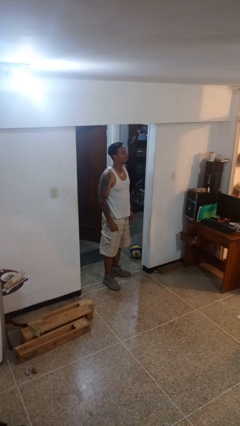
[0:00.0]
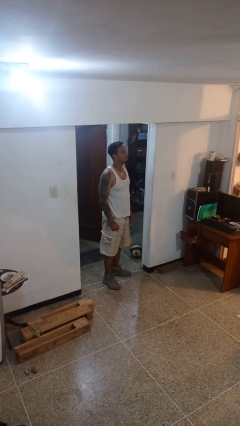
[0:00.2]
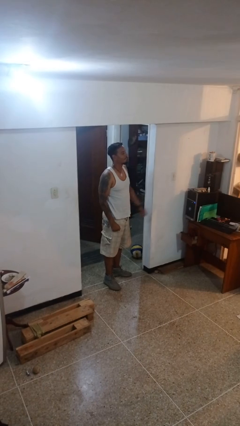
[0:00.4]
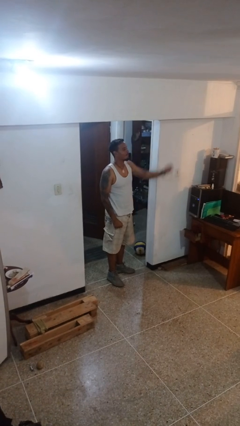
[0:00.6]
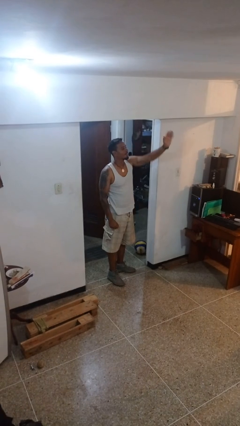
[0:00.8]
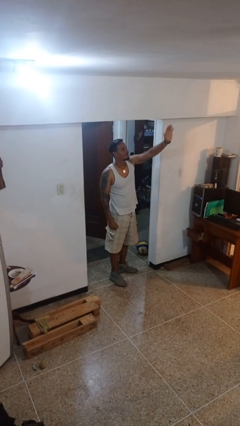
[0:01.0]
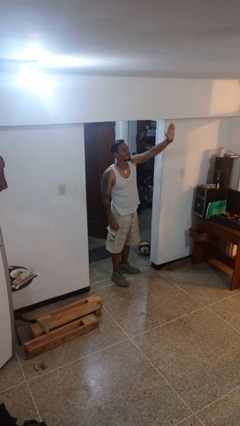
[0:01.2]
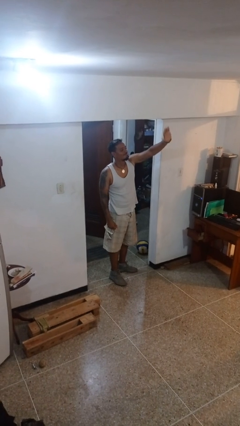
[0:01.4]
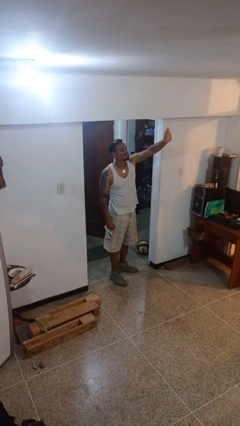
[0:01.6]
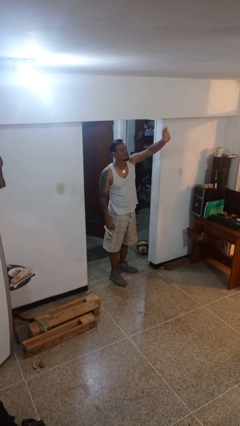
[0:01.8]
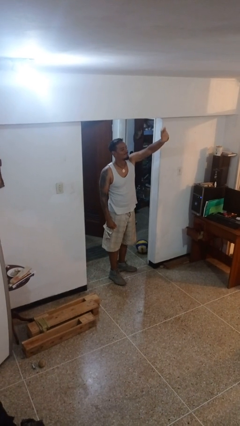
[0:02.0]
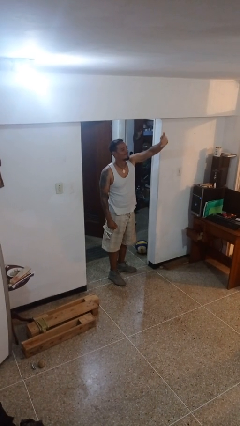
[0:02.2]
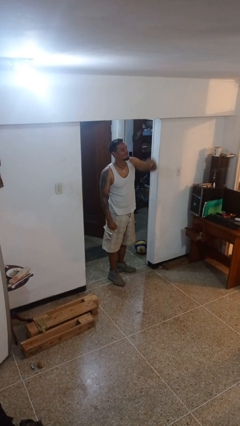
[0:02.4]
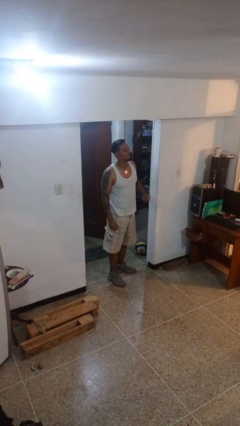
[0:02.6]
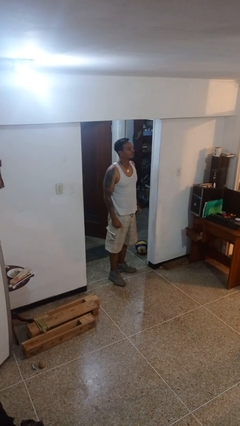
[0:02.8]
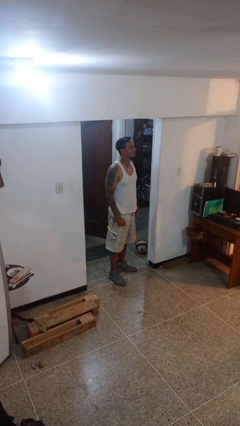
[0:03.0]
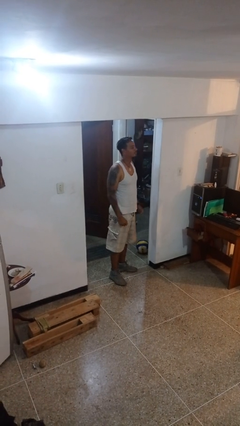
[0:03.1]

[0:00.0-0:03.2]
person waves at person

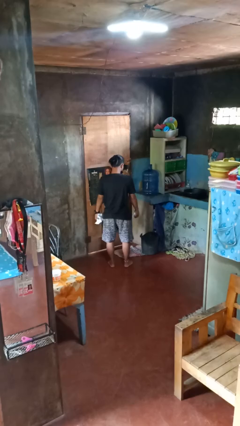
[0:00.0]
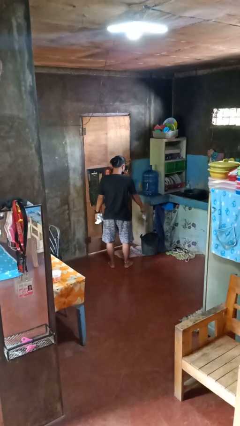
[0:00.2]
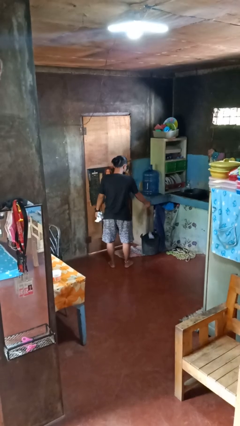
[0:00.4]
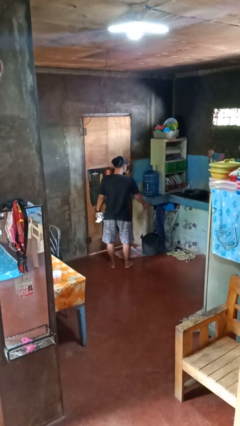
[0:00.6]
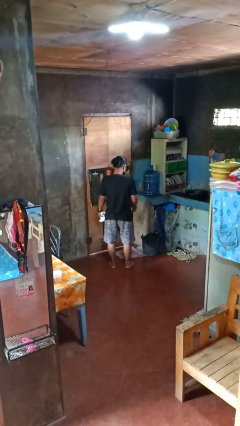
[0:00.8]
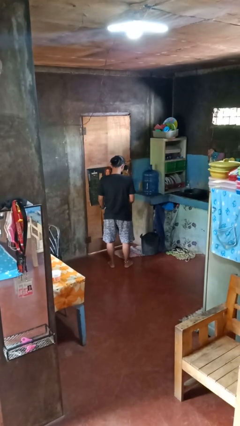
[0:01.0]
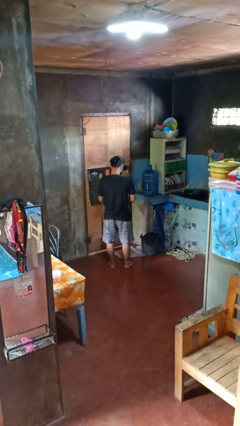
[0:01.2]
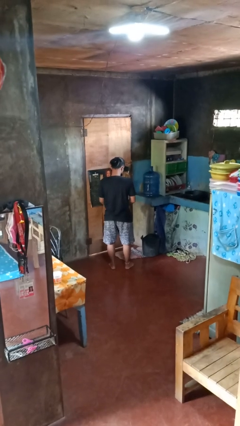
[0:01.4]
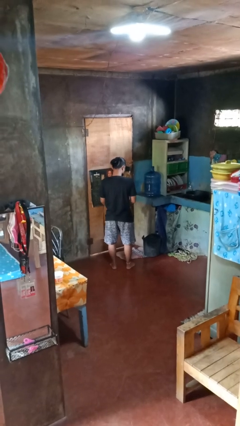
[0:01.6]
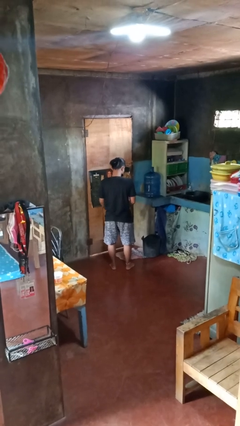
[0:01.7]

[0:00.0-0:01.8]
person discards trash

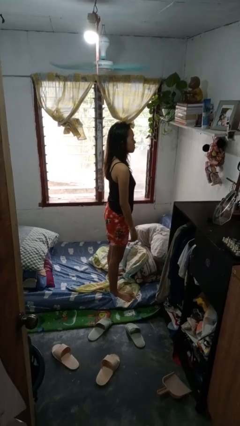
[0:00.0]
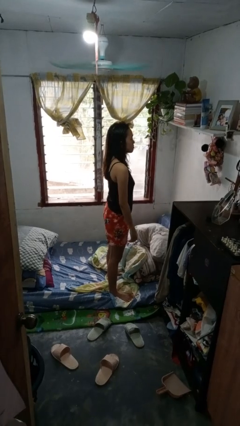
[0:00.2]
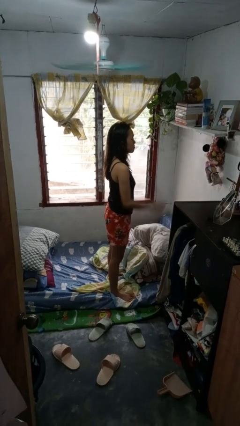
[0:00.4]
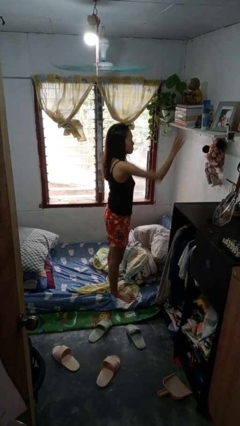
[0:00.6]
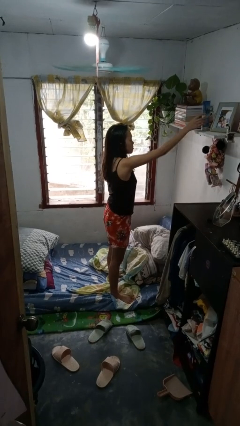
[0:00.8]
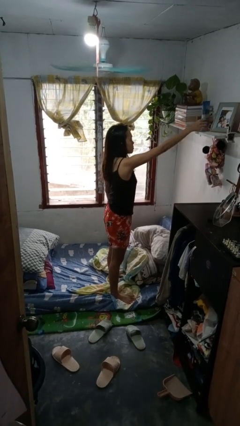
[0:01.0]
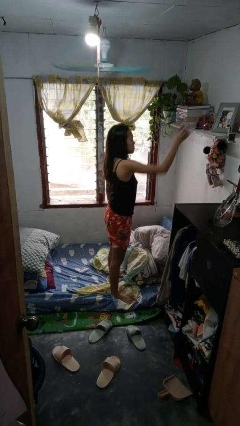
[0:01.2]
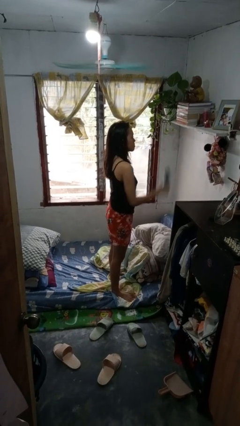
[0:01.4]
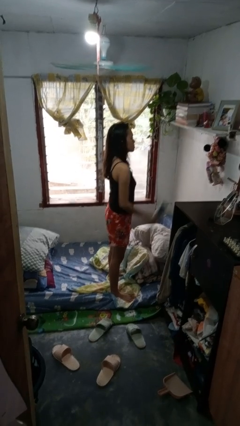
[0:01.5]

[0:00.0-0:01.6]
person picks up object from shelf

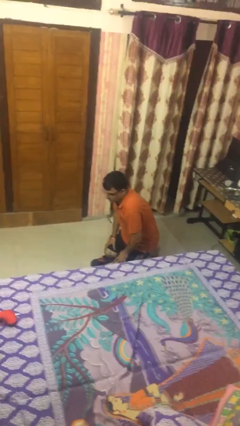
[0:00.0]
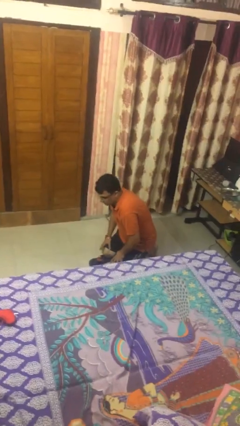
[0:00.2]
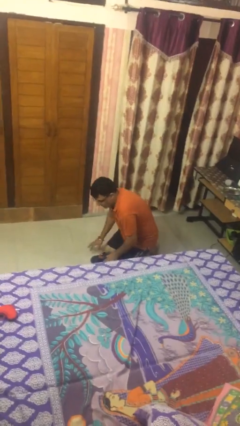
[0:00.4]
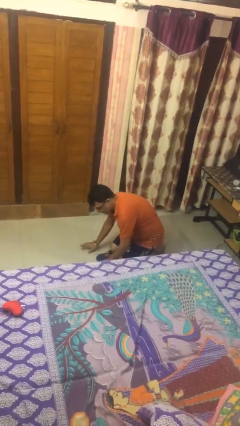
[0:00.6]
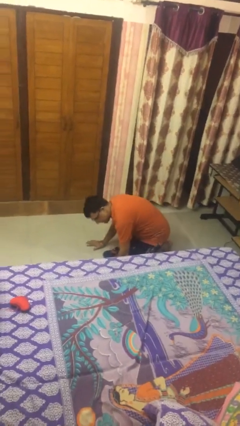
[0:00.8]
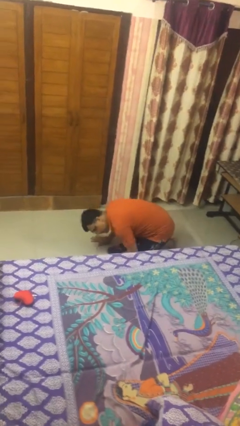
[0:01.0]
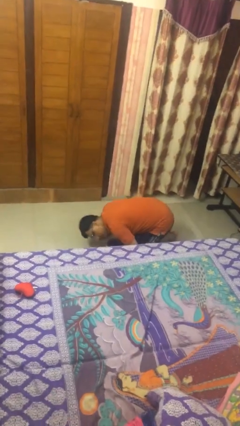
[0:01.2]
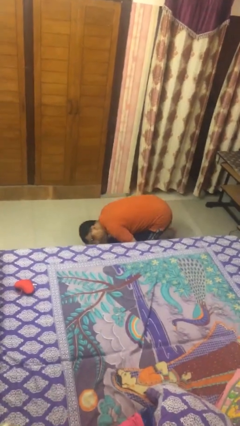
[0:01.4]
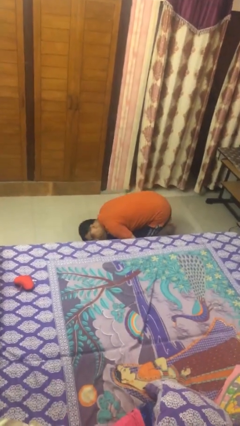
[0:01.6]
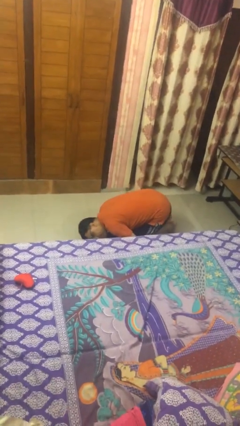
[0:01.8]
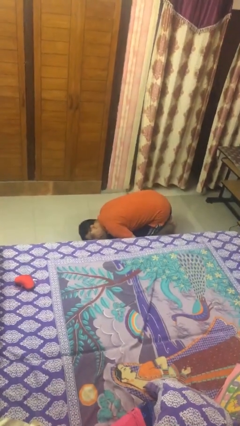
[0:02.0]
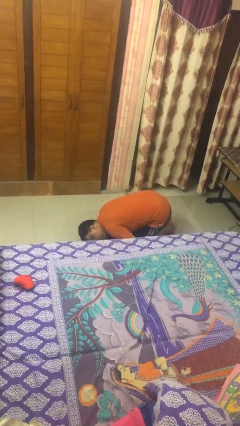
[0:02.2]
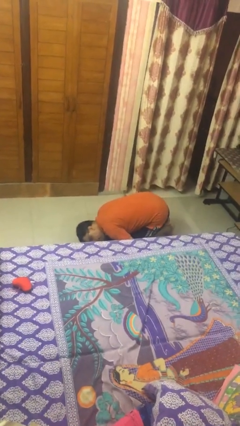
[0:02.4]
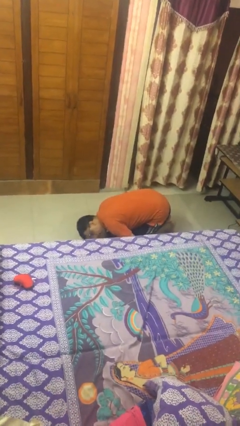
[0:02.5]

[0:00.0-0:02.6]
person searches under bed

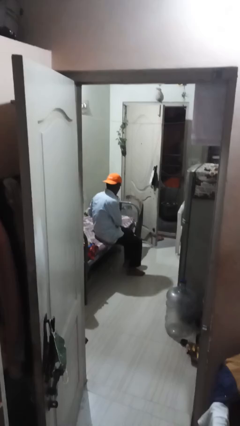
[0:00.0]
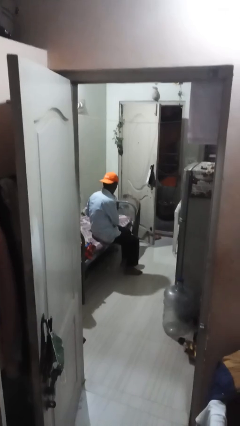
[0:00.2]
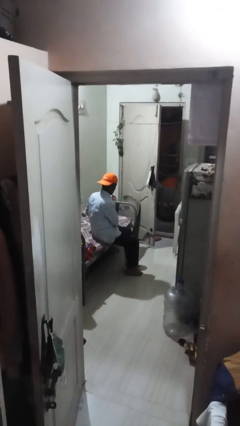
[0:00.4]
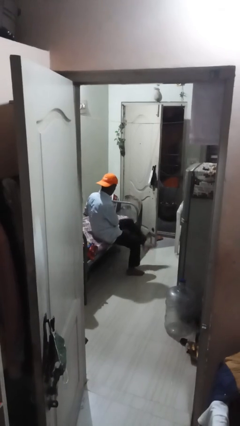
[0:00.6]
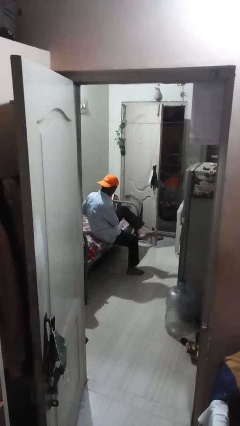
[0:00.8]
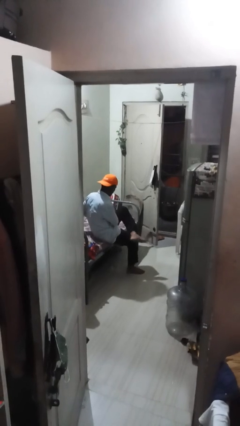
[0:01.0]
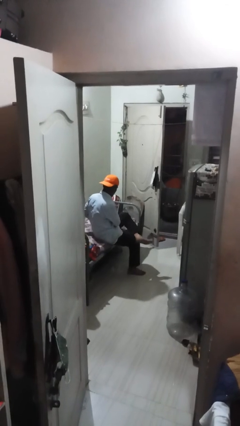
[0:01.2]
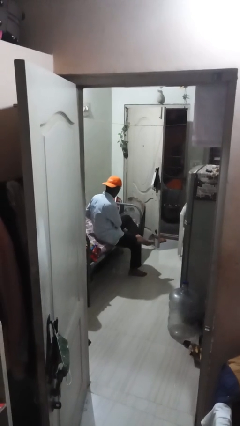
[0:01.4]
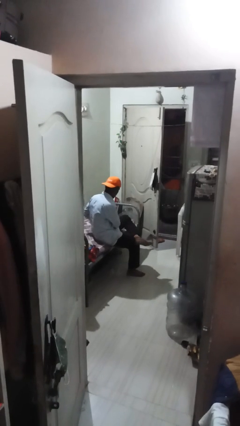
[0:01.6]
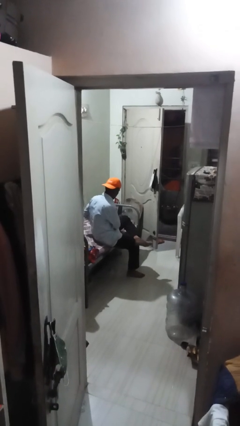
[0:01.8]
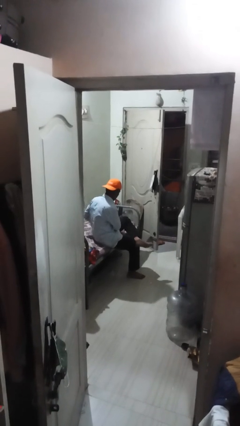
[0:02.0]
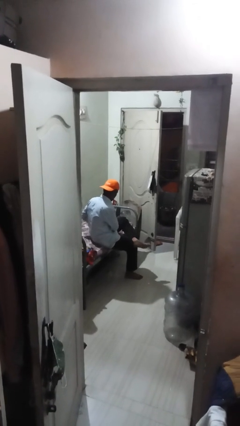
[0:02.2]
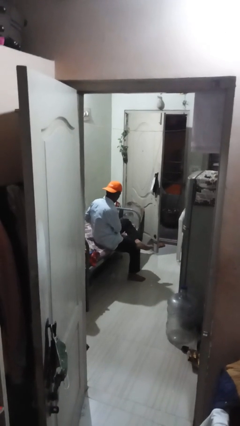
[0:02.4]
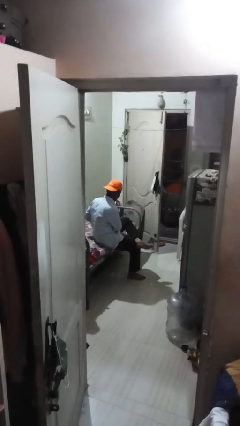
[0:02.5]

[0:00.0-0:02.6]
person crosses legs

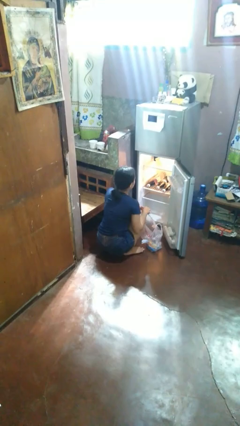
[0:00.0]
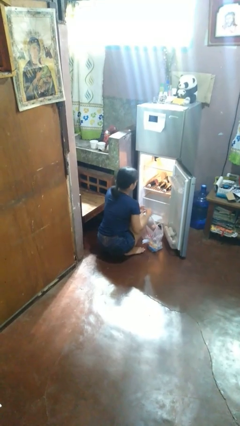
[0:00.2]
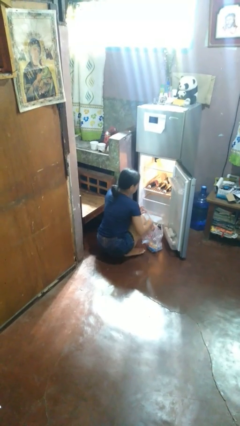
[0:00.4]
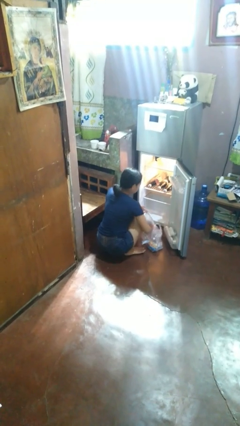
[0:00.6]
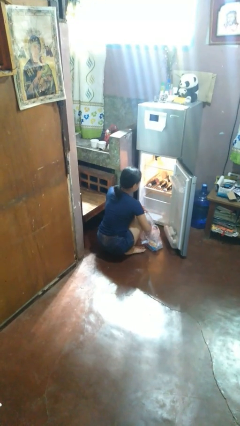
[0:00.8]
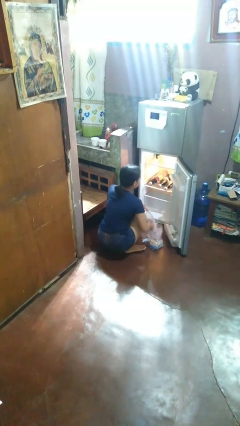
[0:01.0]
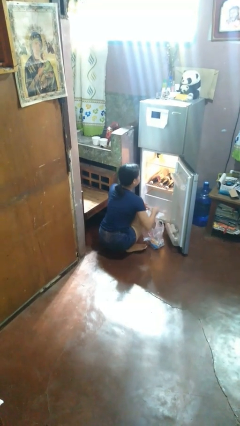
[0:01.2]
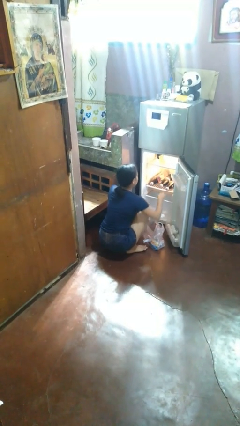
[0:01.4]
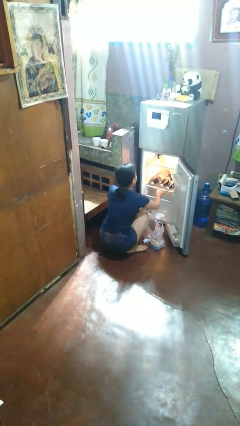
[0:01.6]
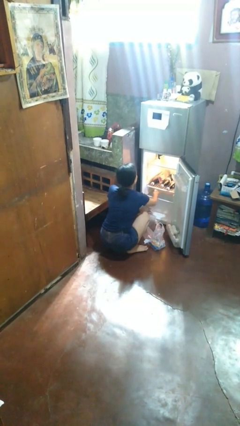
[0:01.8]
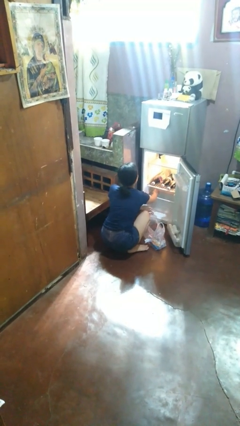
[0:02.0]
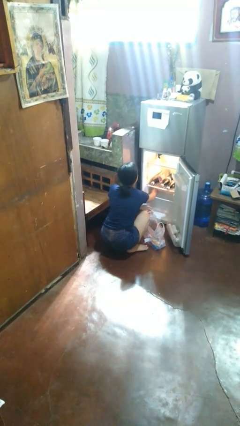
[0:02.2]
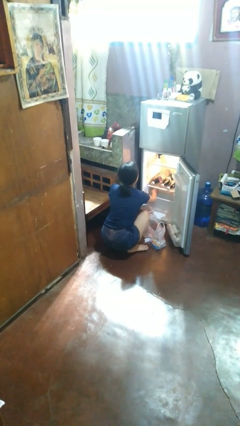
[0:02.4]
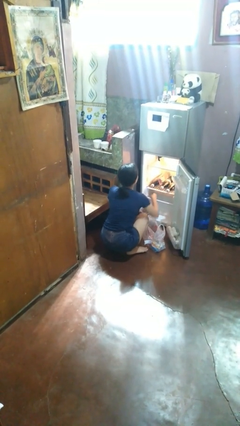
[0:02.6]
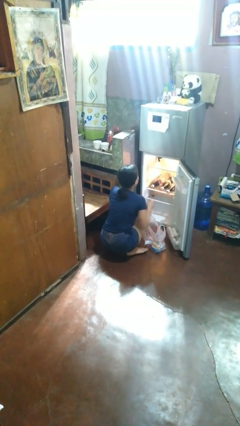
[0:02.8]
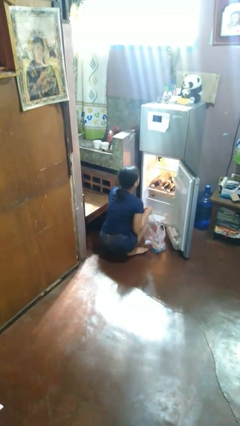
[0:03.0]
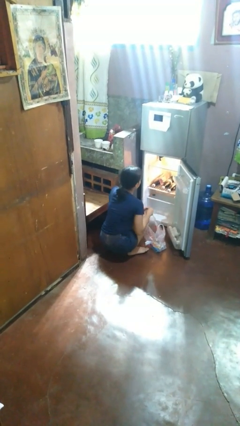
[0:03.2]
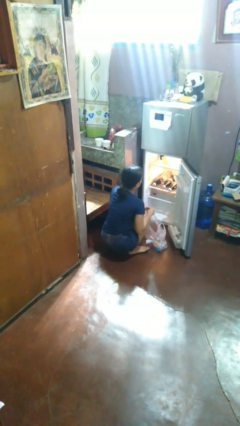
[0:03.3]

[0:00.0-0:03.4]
person loads groceries into refrigerator

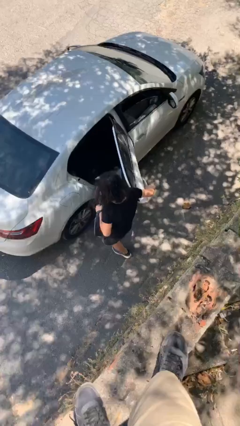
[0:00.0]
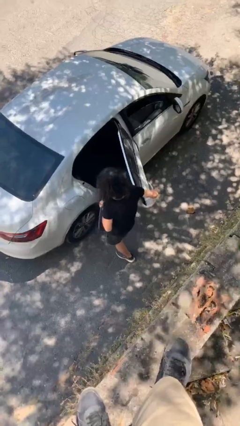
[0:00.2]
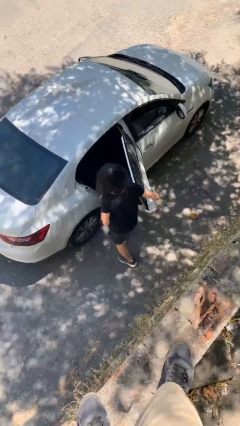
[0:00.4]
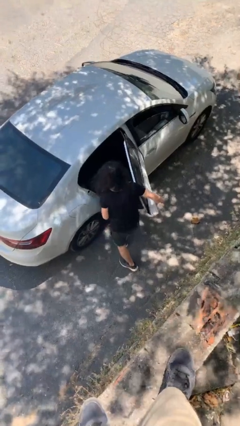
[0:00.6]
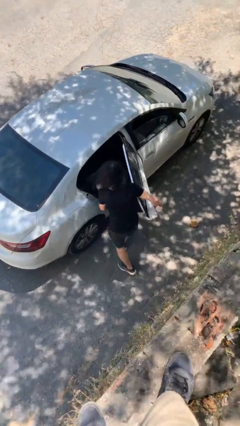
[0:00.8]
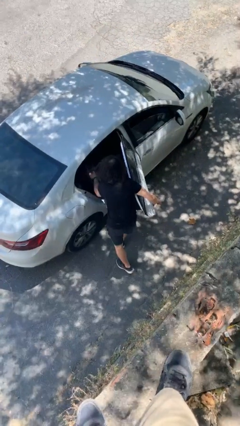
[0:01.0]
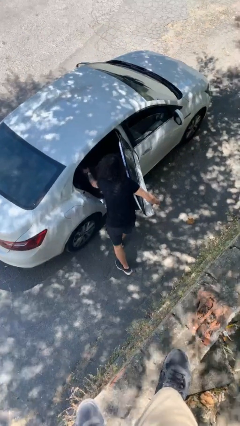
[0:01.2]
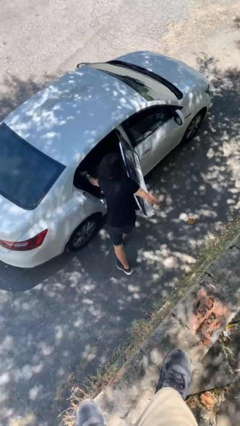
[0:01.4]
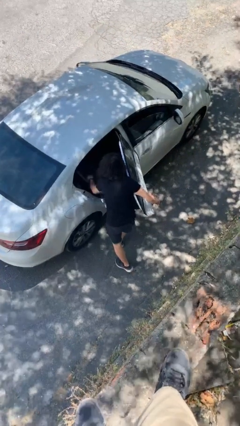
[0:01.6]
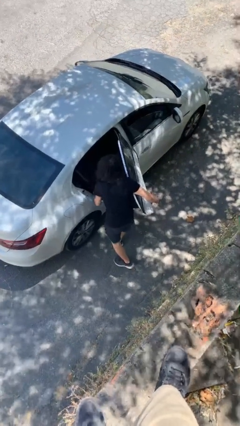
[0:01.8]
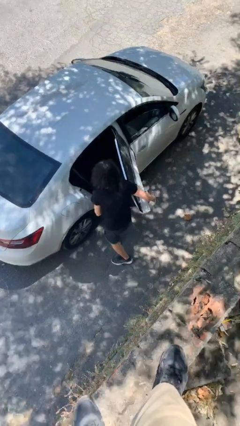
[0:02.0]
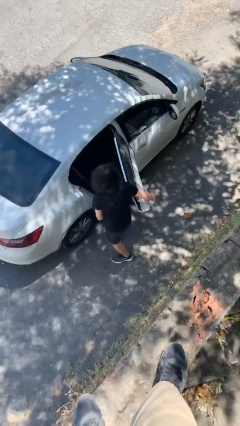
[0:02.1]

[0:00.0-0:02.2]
person loads car
